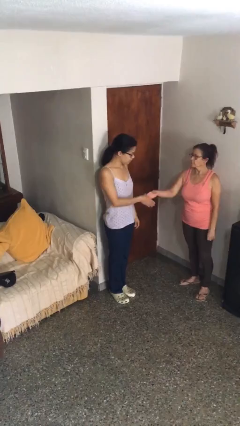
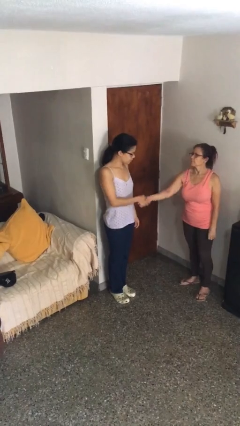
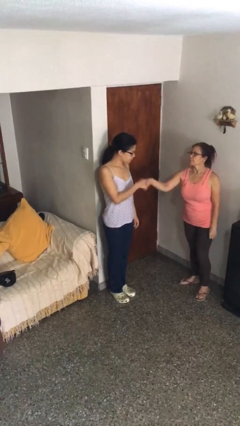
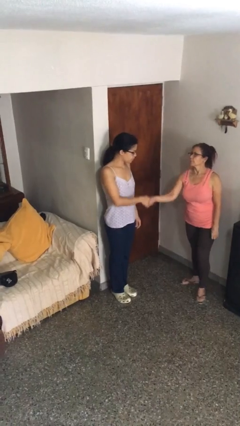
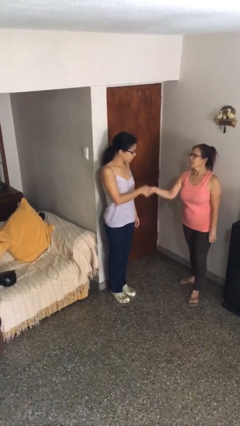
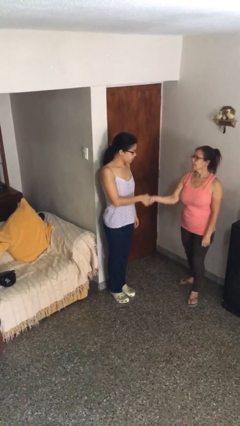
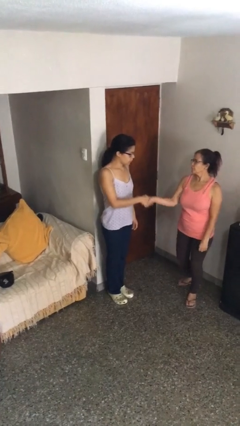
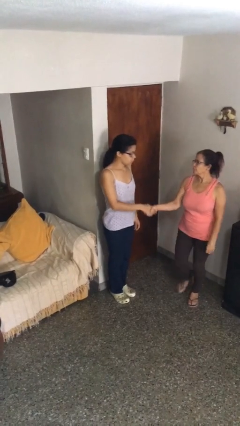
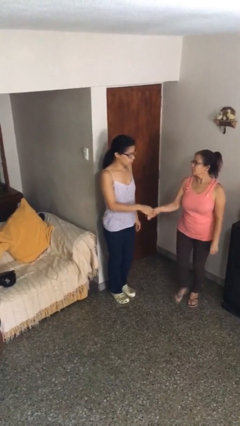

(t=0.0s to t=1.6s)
person shakes hand

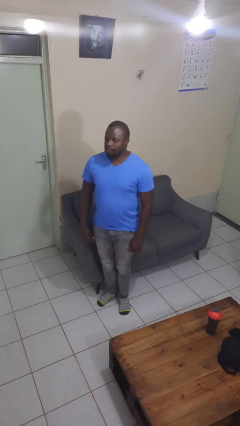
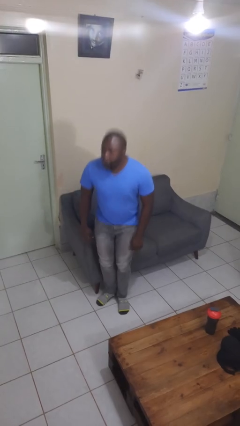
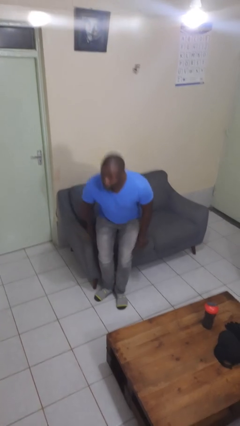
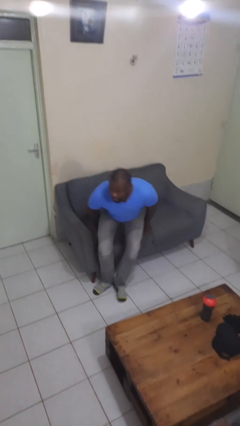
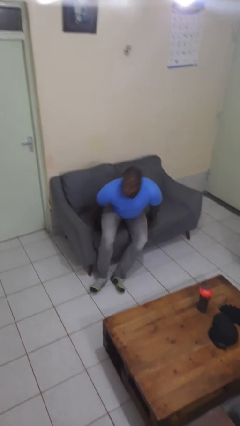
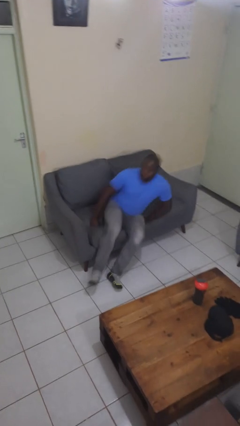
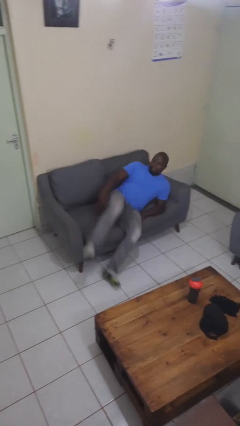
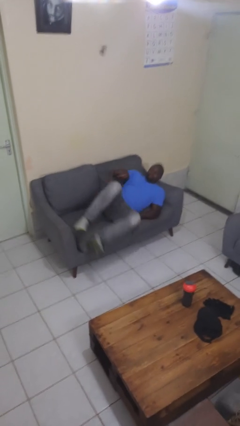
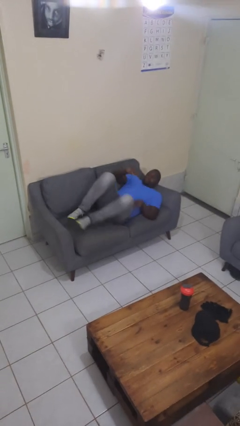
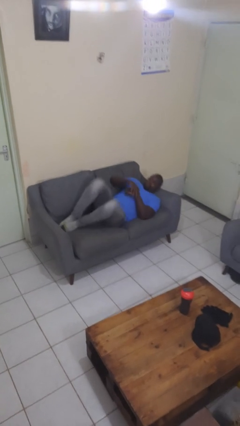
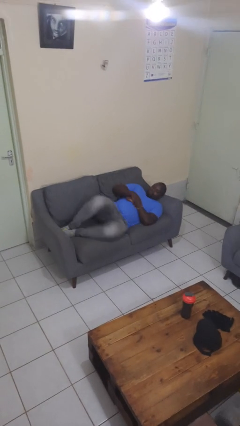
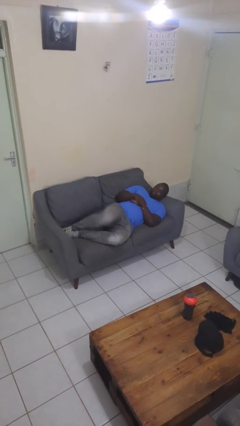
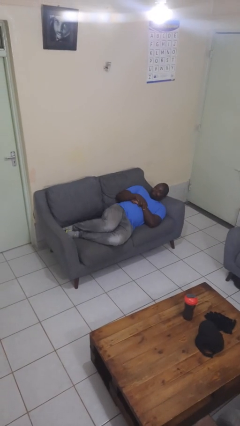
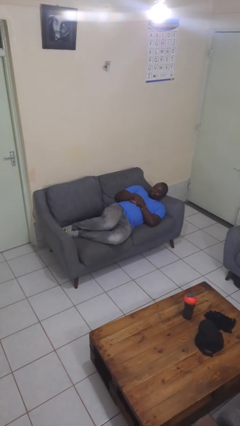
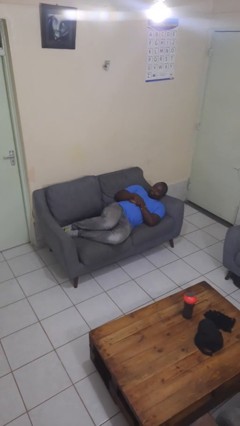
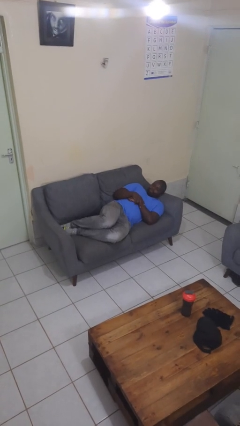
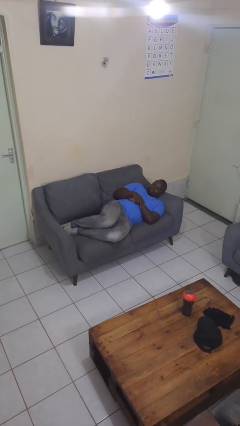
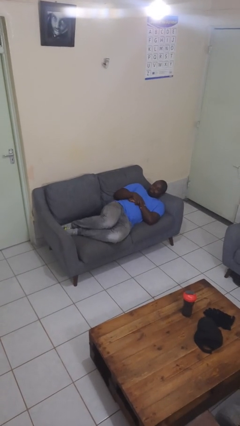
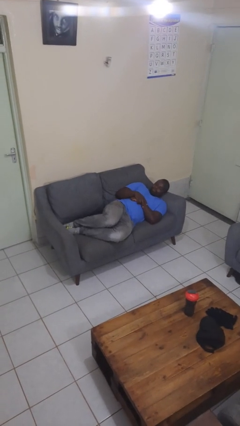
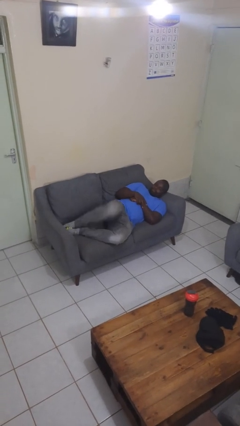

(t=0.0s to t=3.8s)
person lies down on couch

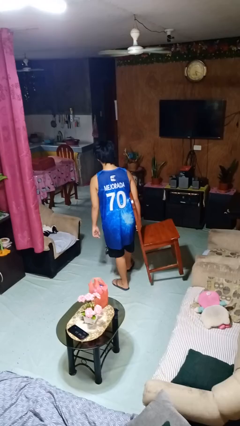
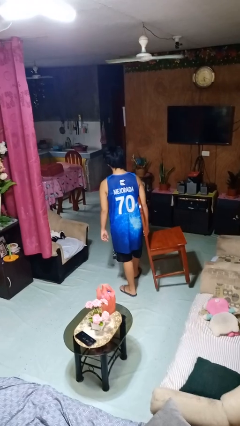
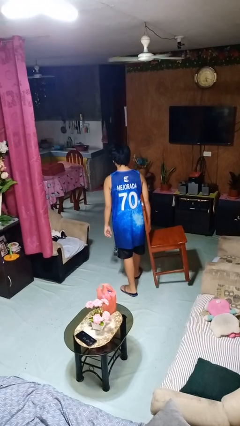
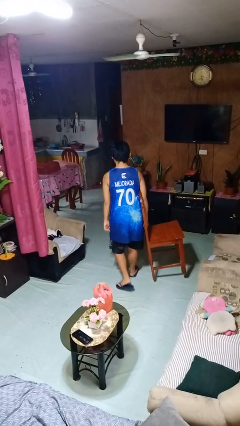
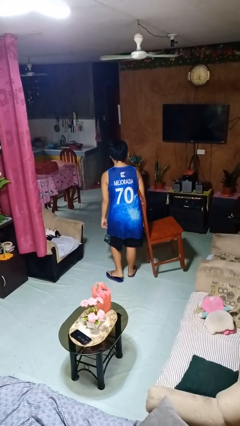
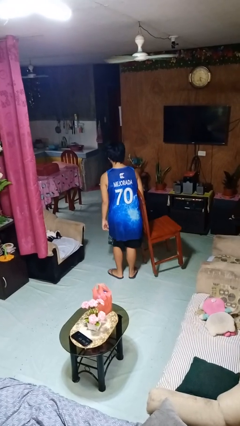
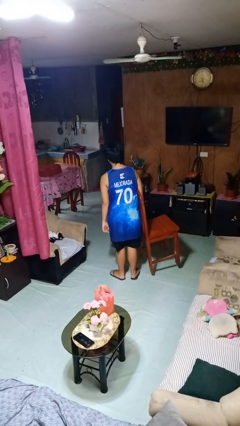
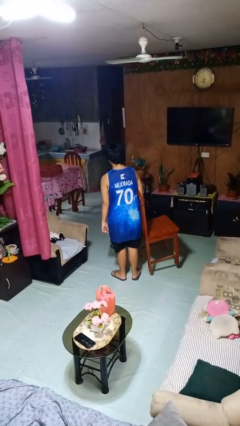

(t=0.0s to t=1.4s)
person carries furniture

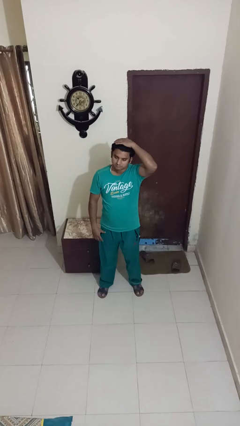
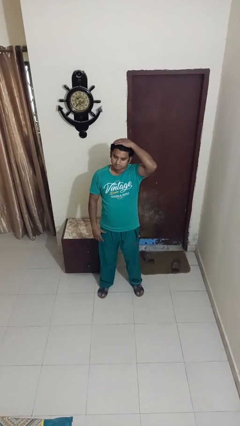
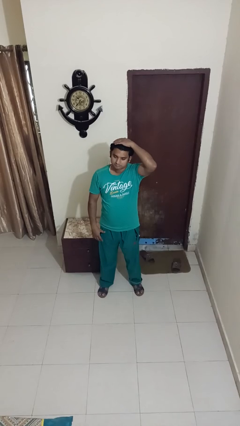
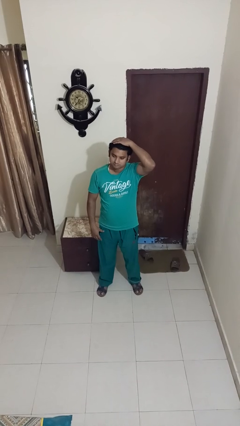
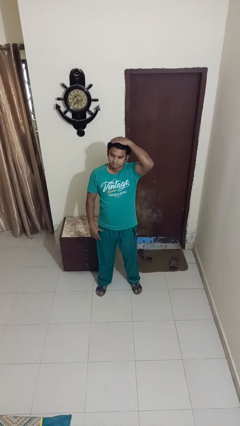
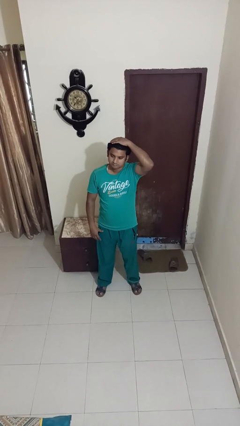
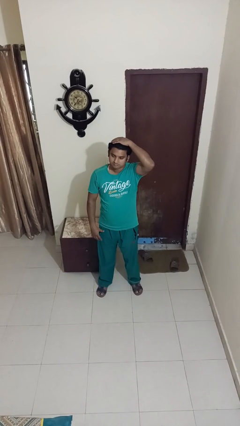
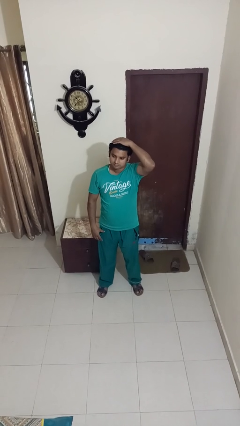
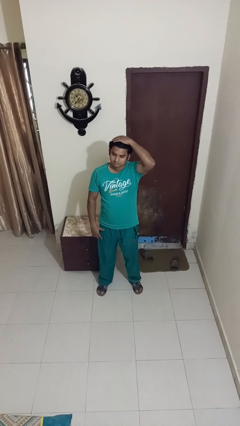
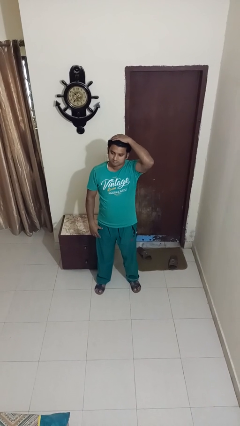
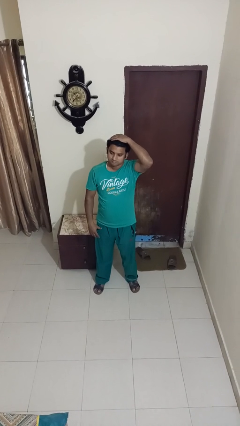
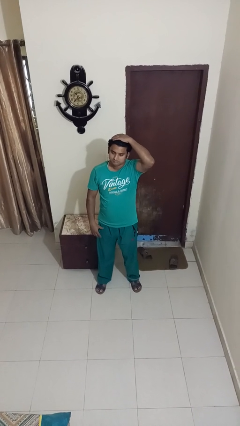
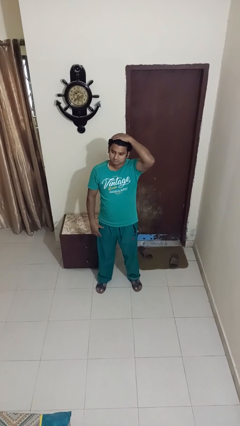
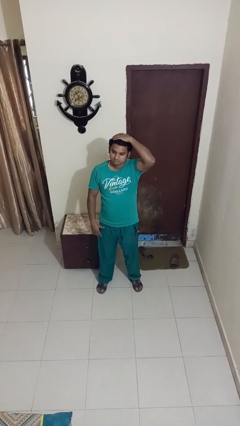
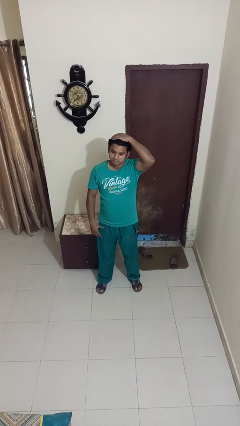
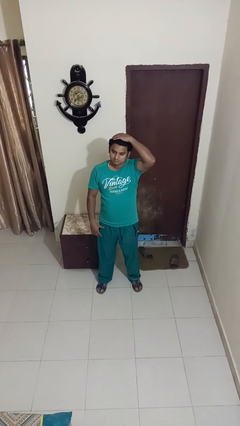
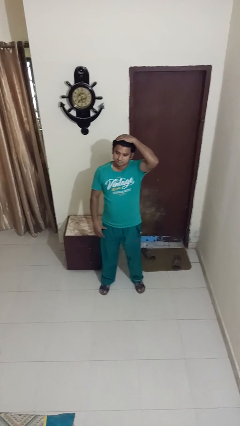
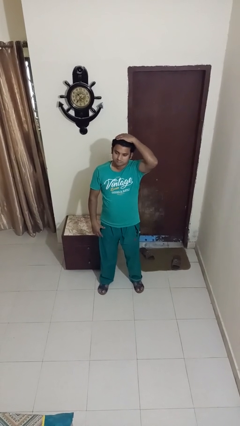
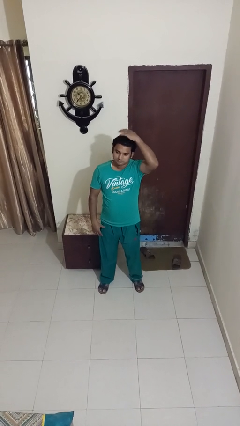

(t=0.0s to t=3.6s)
person pats head

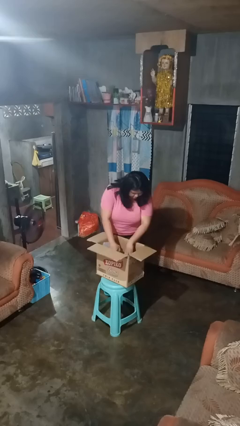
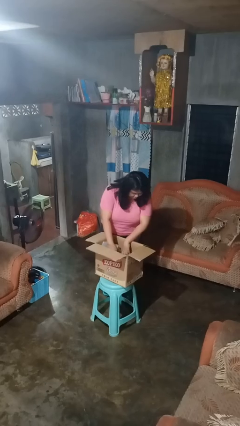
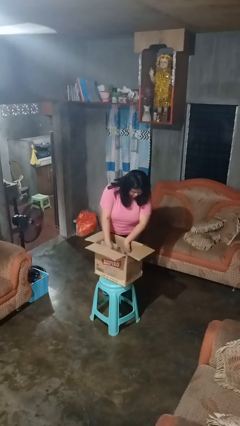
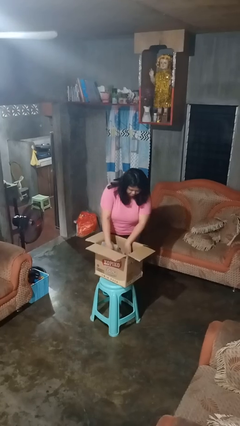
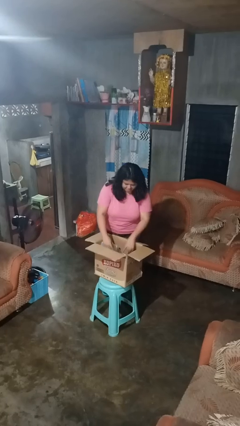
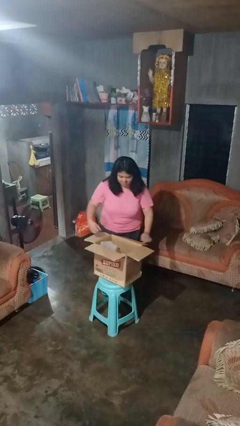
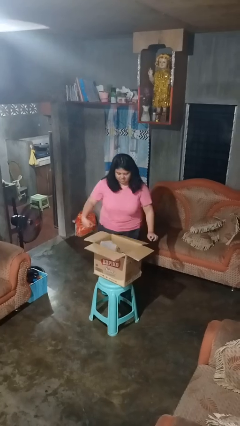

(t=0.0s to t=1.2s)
person searches in box

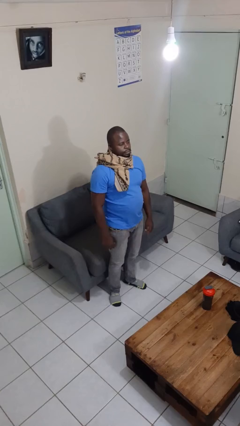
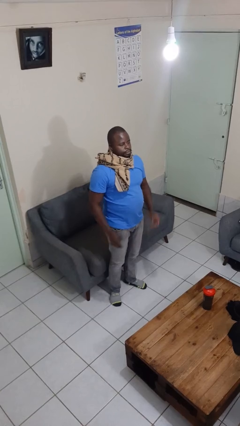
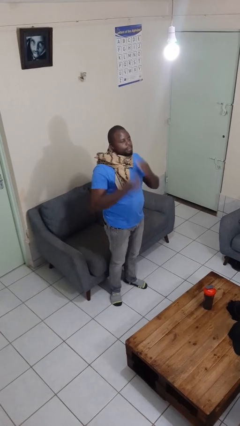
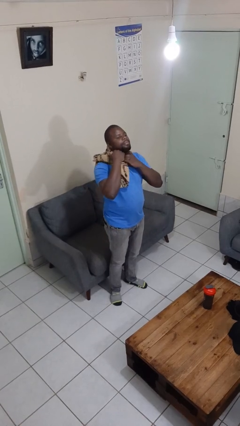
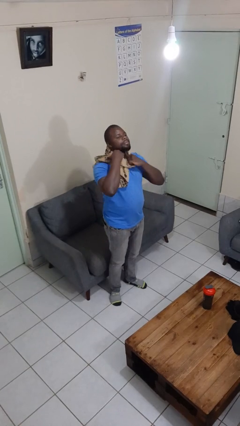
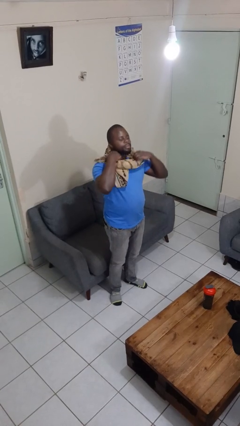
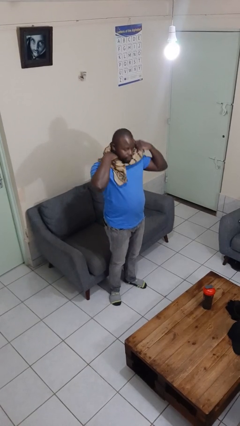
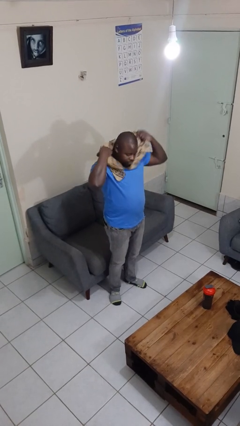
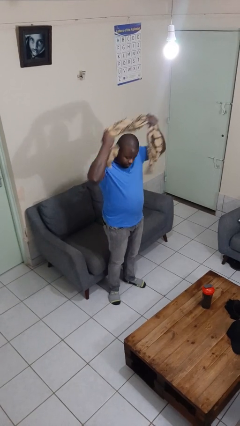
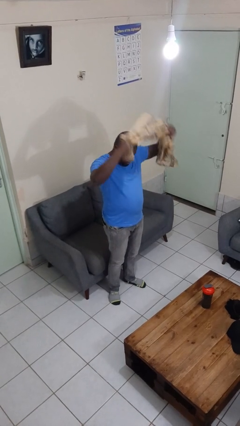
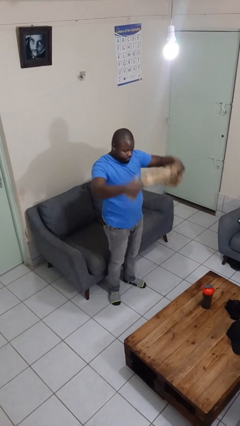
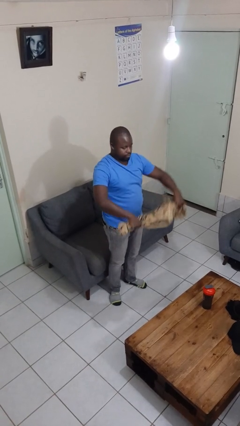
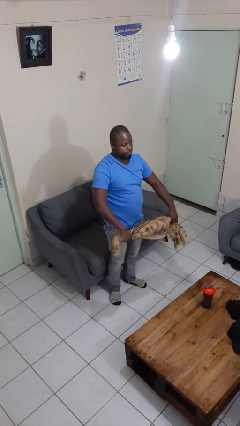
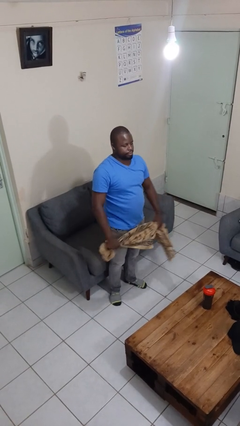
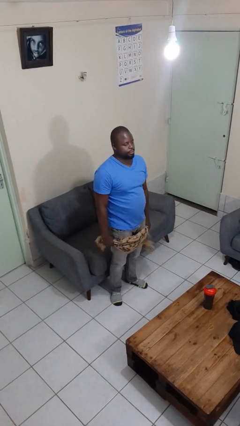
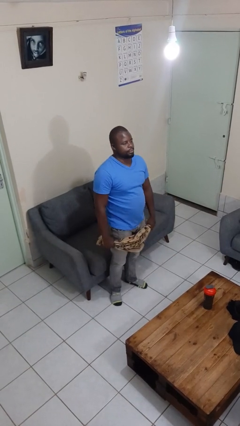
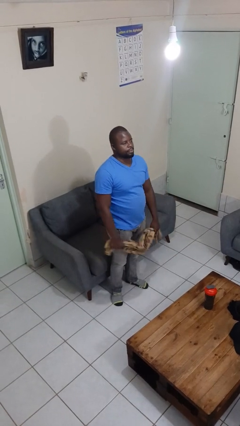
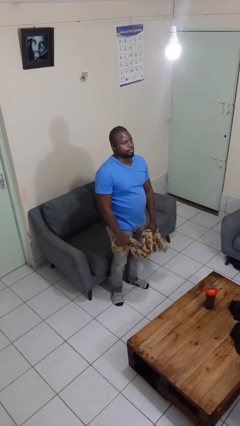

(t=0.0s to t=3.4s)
person takes off scarf

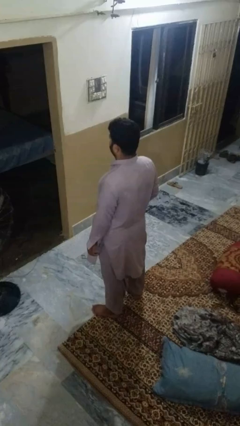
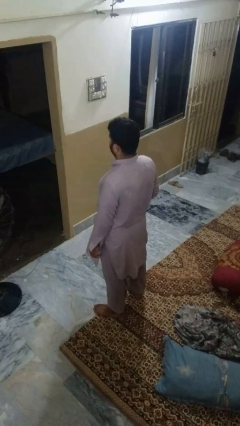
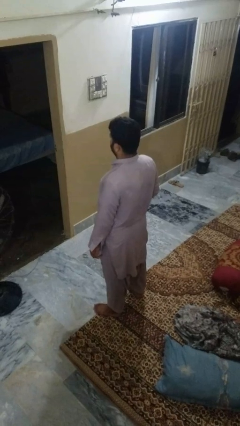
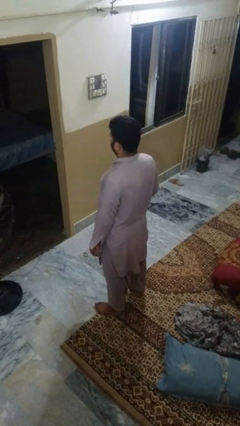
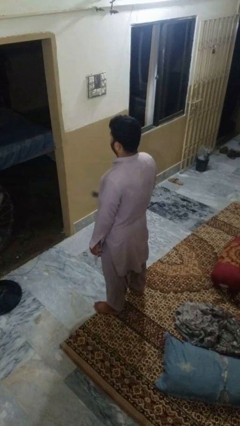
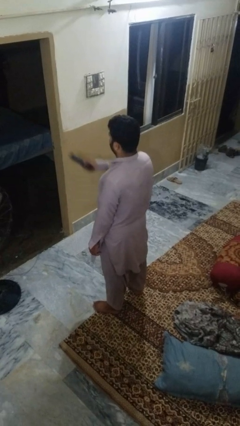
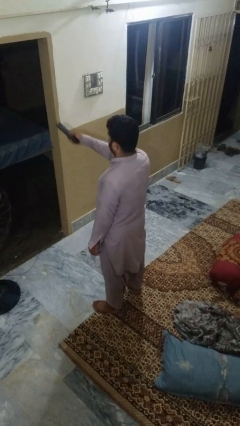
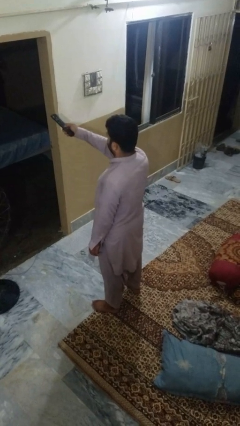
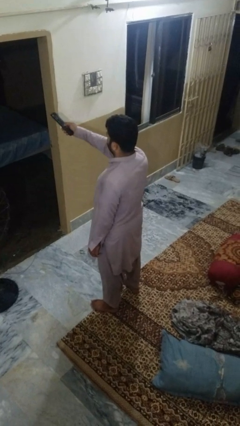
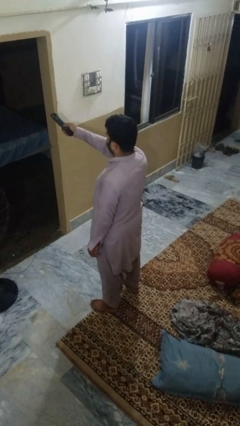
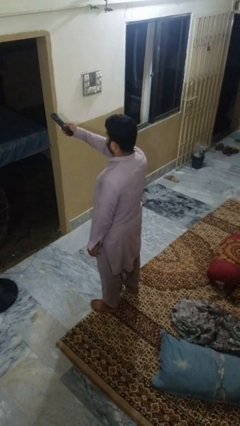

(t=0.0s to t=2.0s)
person uses television remote

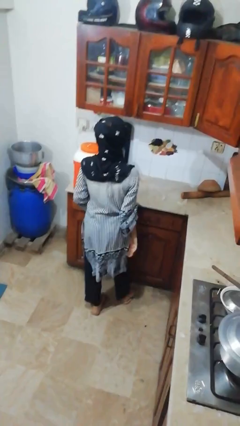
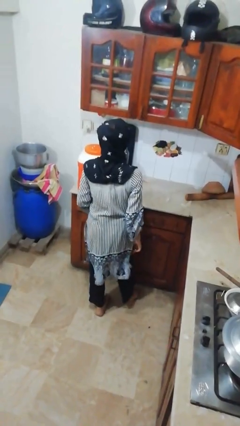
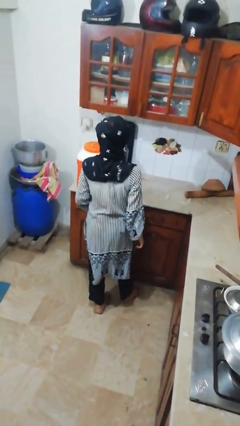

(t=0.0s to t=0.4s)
person puts down object on shelf
